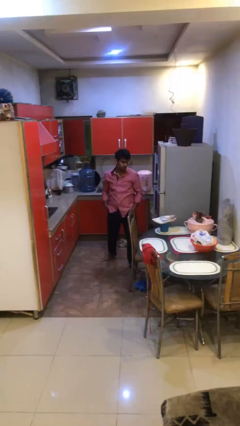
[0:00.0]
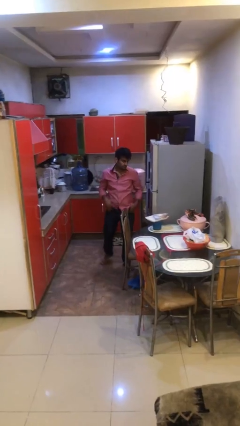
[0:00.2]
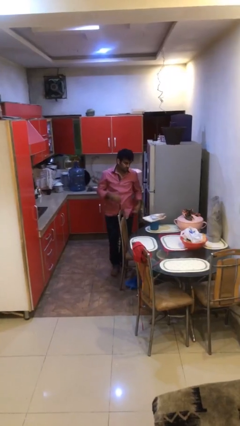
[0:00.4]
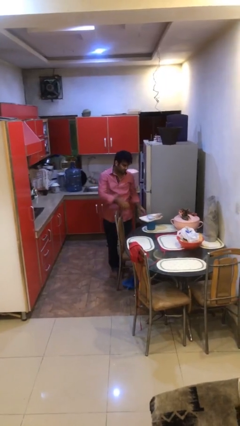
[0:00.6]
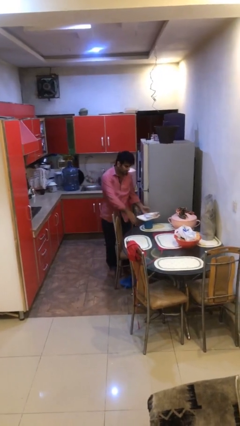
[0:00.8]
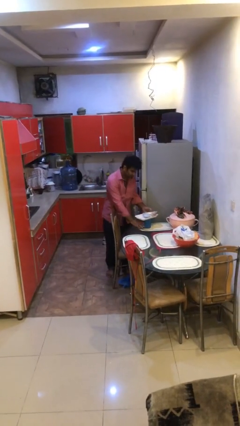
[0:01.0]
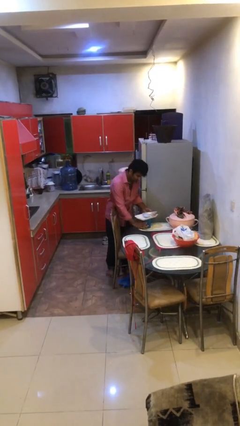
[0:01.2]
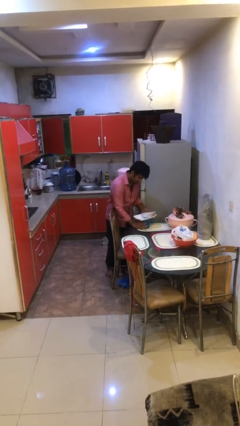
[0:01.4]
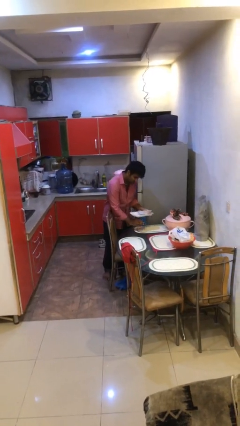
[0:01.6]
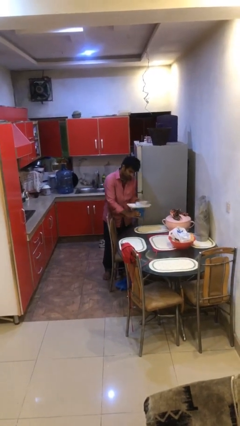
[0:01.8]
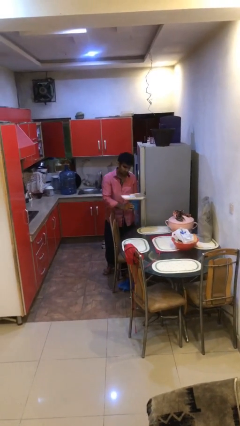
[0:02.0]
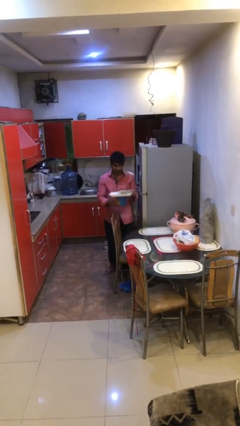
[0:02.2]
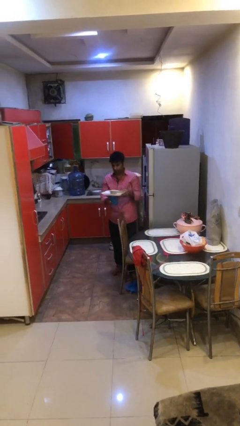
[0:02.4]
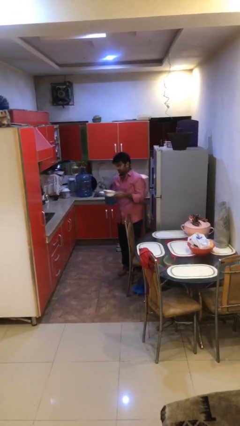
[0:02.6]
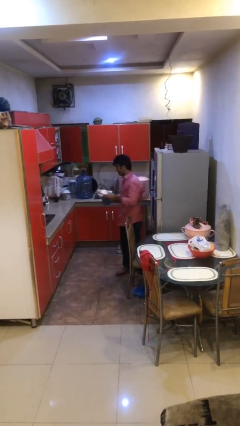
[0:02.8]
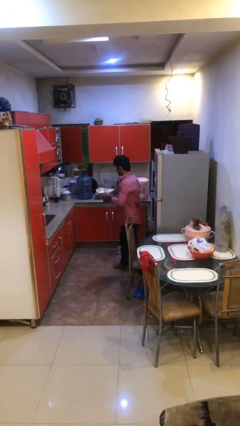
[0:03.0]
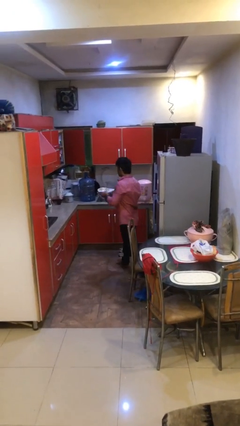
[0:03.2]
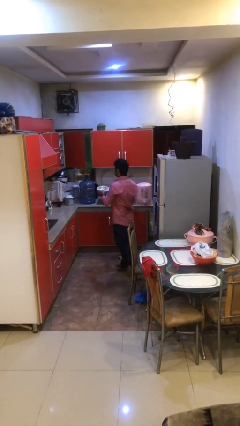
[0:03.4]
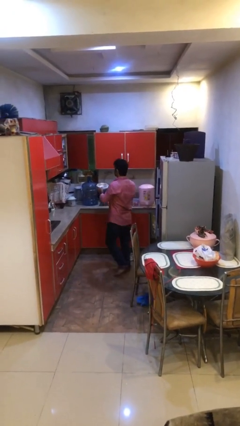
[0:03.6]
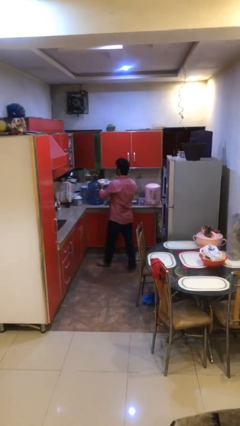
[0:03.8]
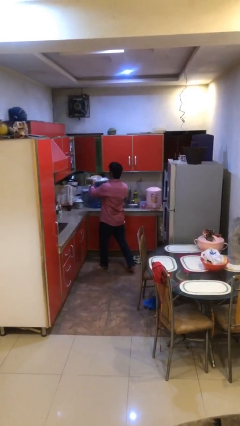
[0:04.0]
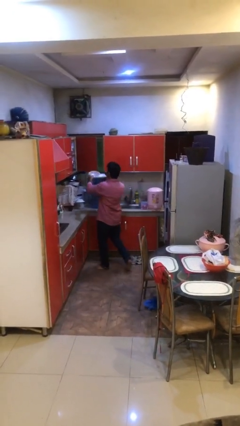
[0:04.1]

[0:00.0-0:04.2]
person picks up object from table

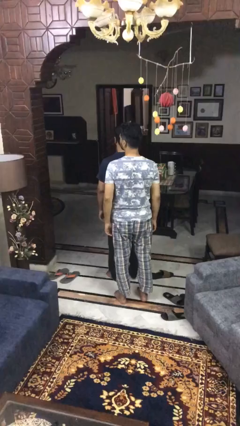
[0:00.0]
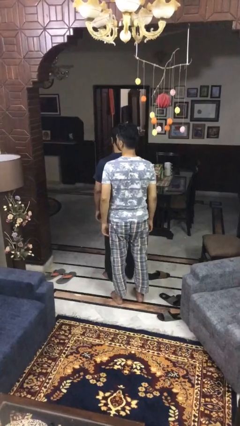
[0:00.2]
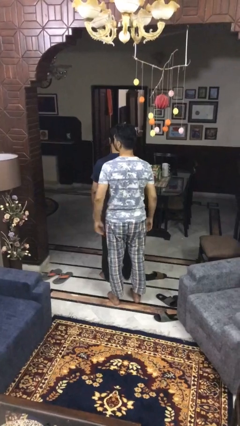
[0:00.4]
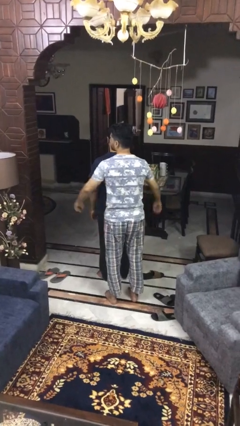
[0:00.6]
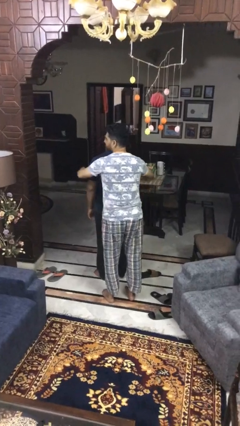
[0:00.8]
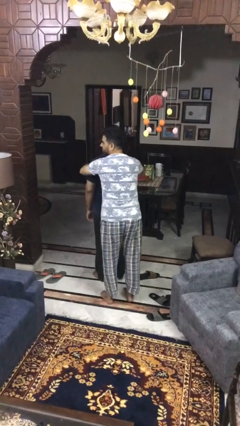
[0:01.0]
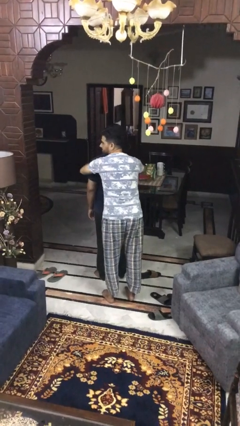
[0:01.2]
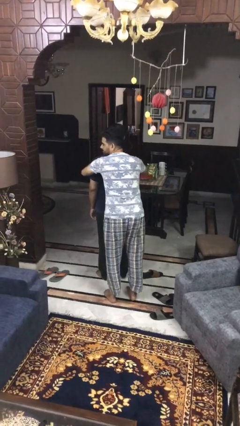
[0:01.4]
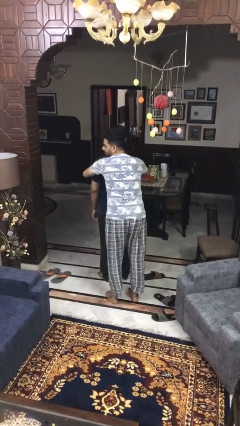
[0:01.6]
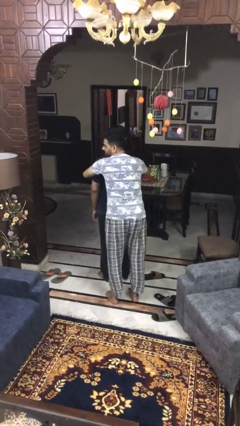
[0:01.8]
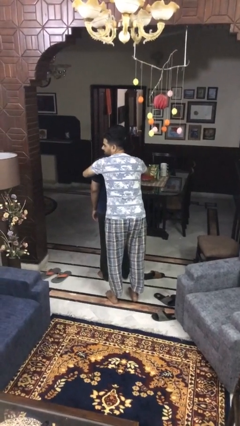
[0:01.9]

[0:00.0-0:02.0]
person hugs person from behind

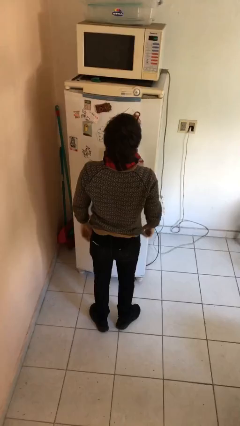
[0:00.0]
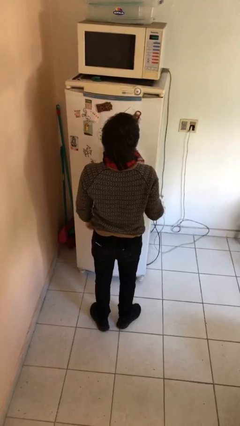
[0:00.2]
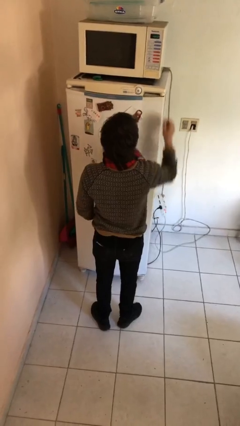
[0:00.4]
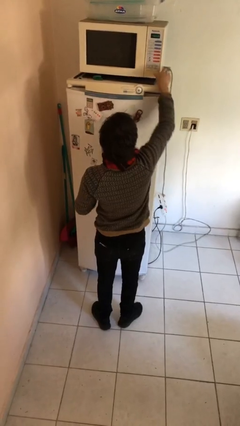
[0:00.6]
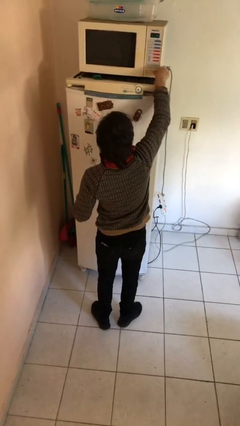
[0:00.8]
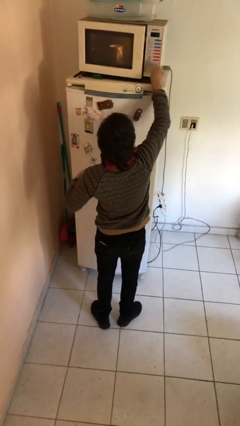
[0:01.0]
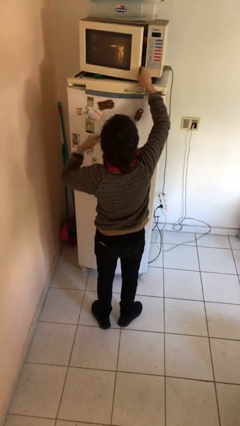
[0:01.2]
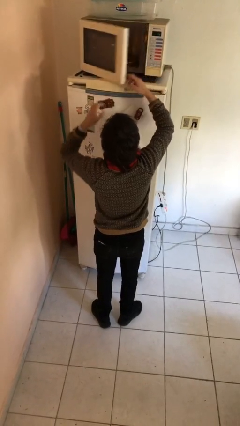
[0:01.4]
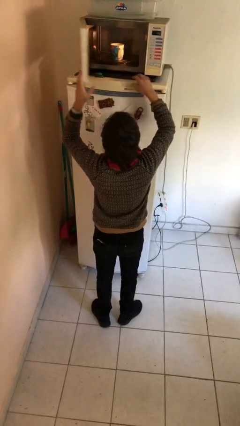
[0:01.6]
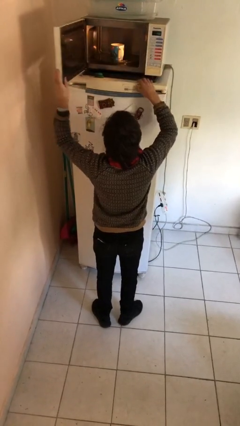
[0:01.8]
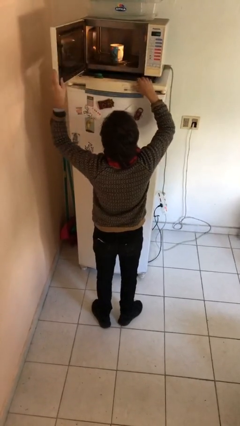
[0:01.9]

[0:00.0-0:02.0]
person opens microwave

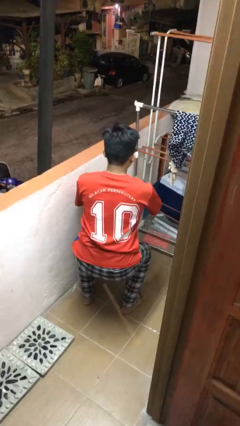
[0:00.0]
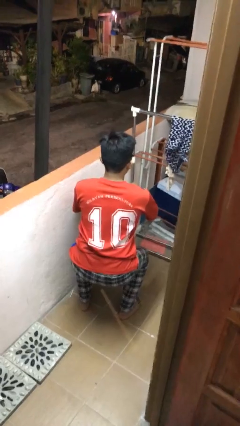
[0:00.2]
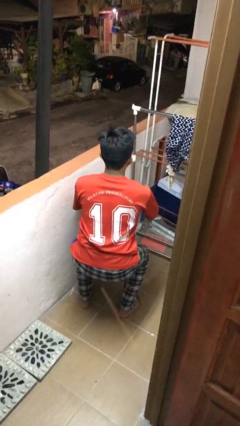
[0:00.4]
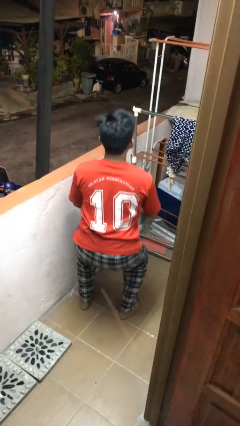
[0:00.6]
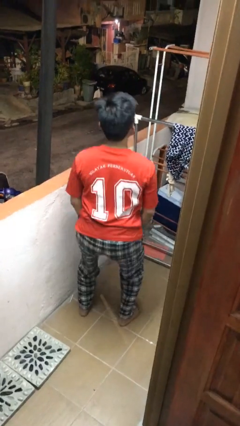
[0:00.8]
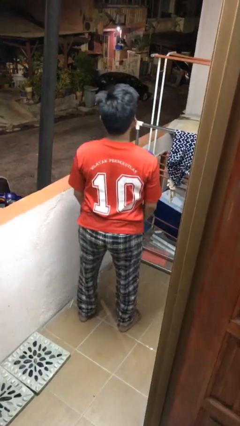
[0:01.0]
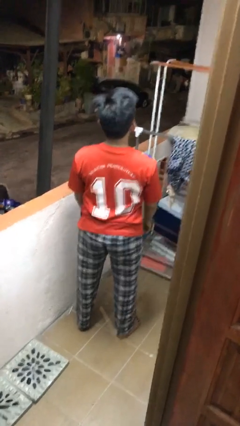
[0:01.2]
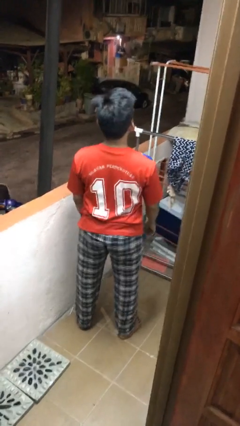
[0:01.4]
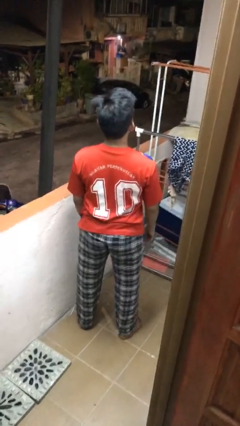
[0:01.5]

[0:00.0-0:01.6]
person stands up

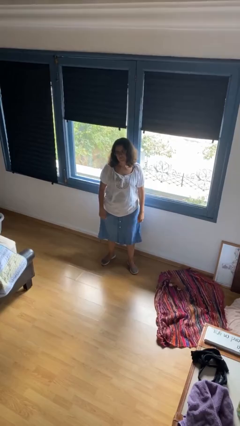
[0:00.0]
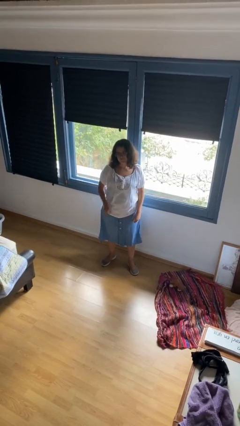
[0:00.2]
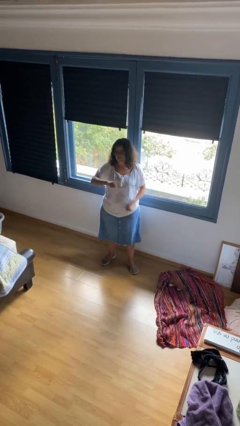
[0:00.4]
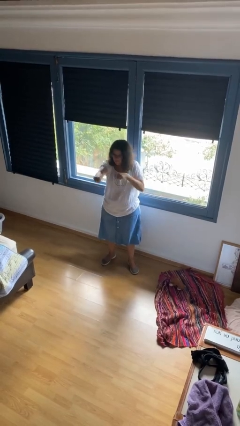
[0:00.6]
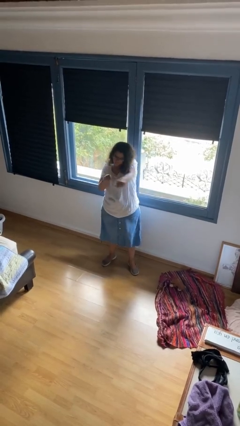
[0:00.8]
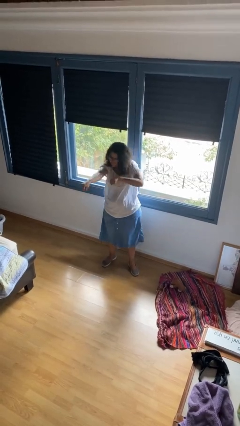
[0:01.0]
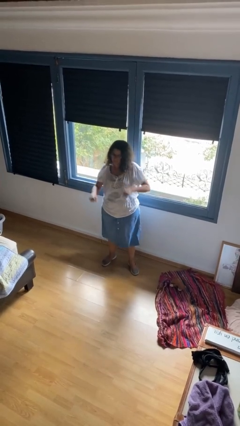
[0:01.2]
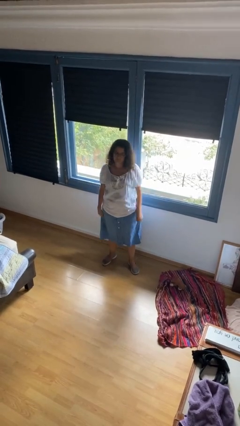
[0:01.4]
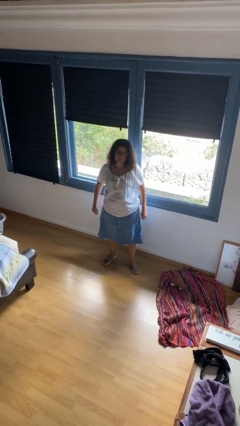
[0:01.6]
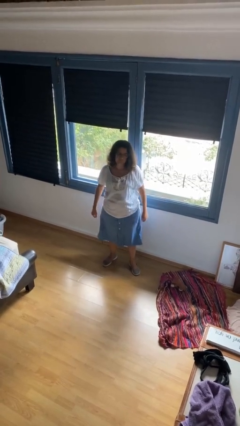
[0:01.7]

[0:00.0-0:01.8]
person punches

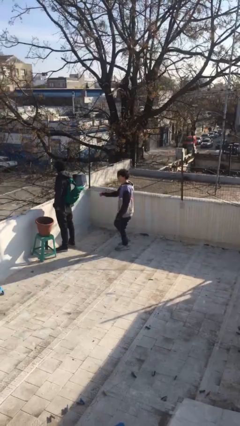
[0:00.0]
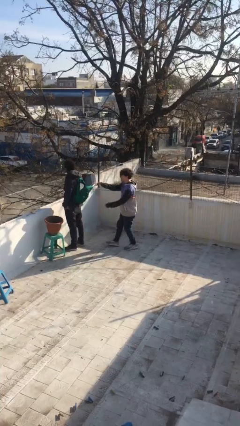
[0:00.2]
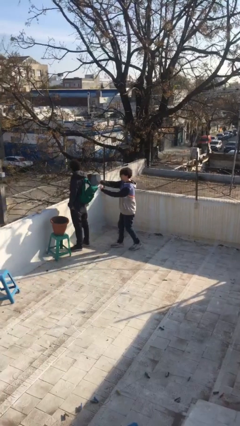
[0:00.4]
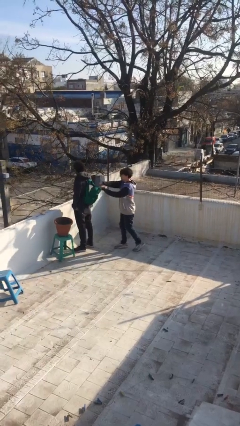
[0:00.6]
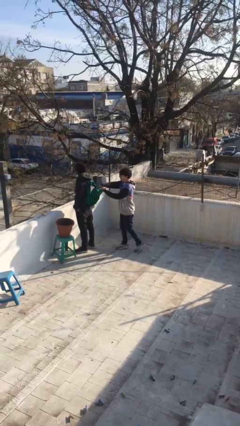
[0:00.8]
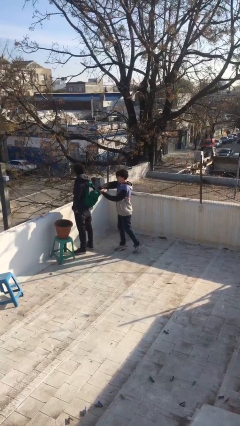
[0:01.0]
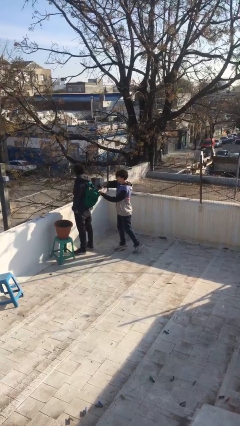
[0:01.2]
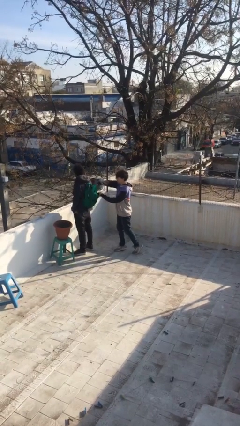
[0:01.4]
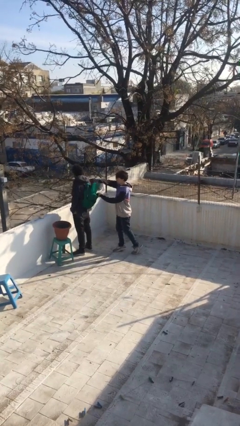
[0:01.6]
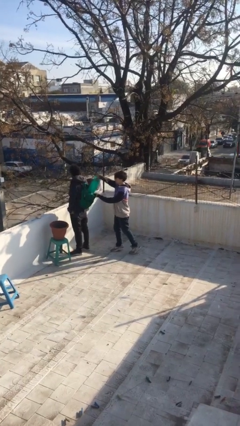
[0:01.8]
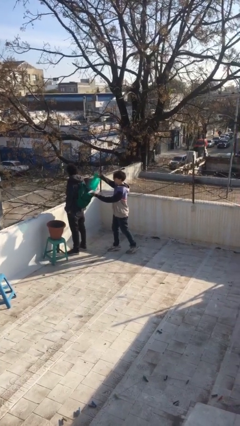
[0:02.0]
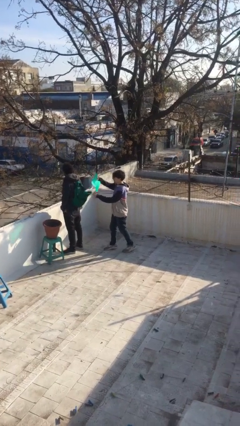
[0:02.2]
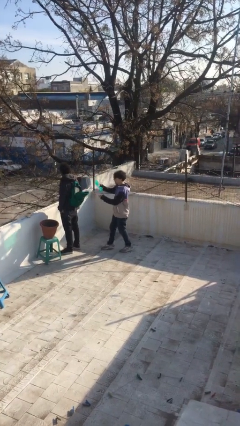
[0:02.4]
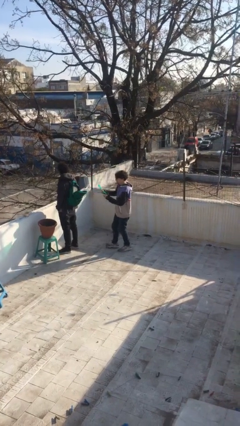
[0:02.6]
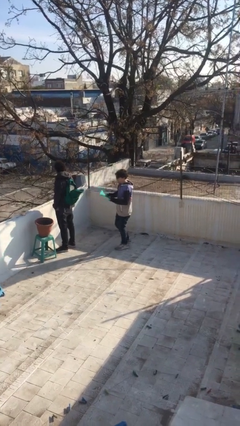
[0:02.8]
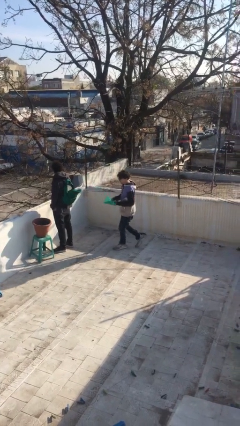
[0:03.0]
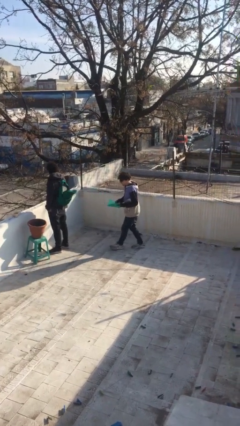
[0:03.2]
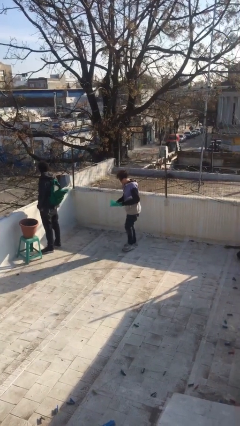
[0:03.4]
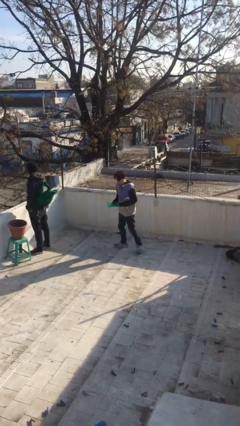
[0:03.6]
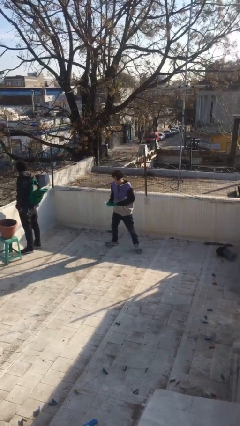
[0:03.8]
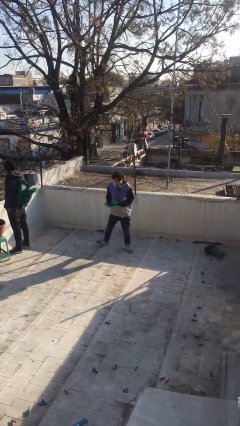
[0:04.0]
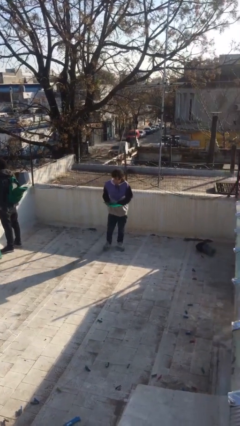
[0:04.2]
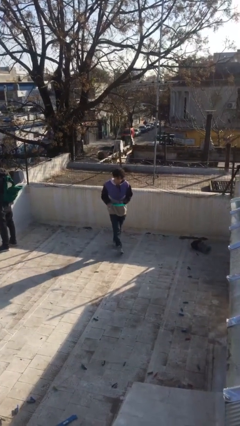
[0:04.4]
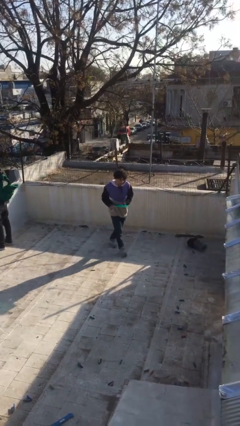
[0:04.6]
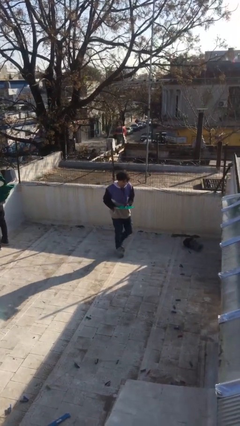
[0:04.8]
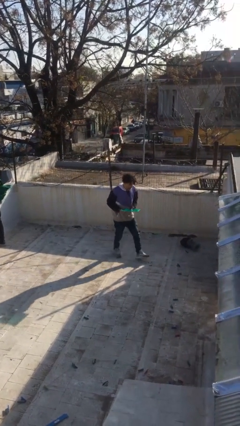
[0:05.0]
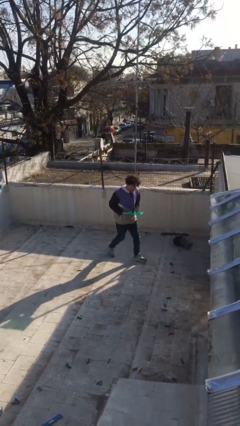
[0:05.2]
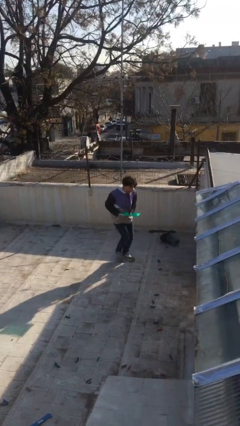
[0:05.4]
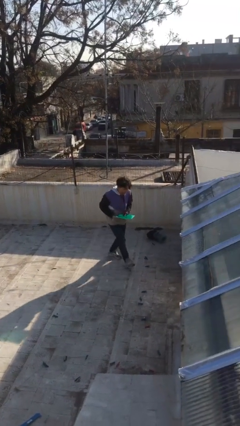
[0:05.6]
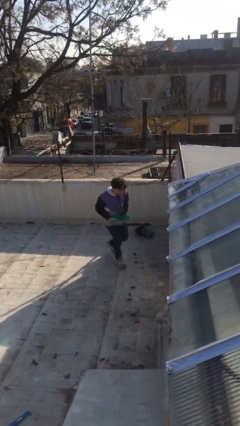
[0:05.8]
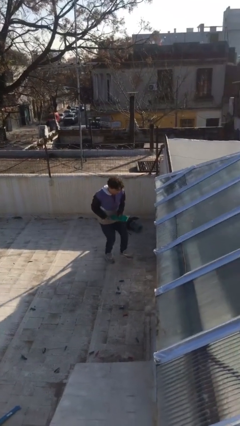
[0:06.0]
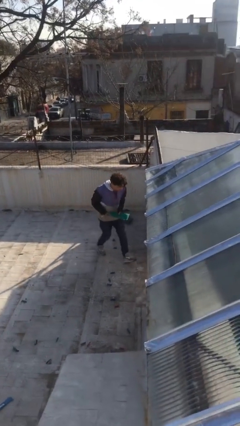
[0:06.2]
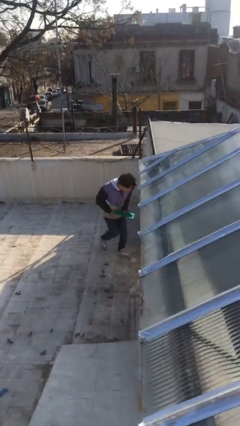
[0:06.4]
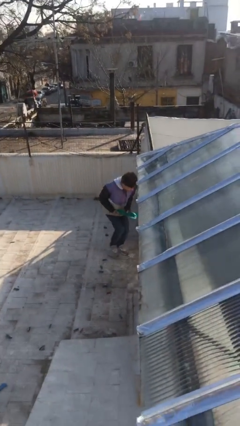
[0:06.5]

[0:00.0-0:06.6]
person steals object from person
